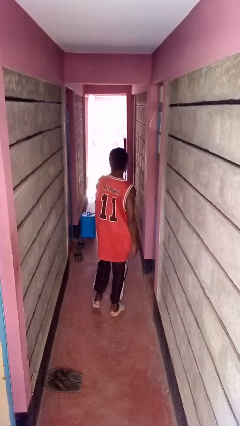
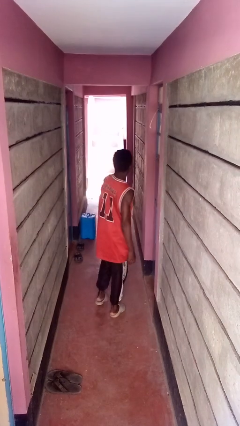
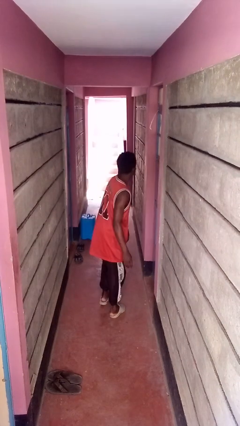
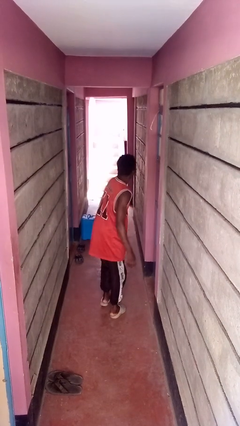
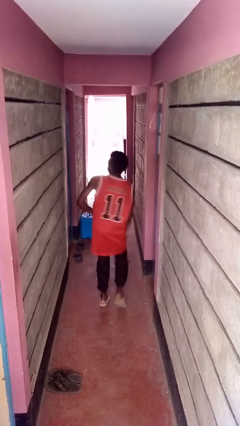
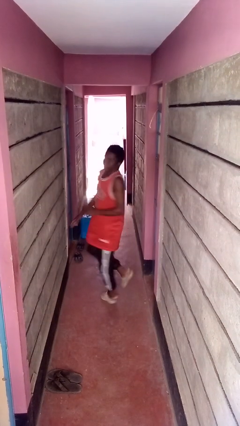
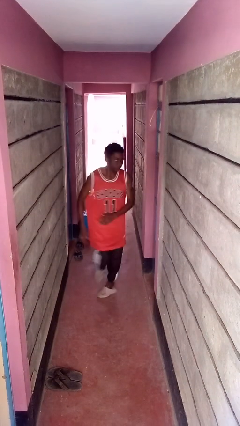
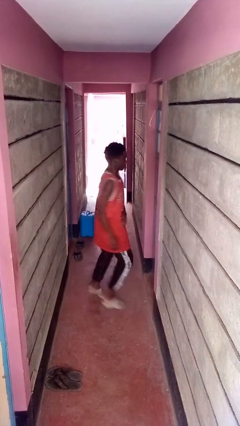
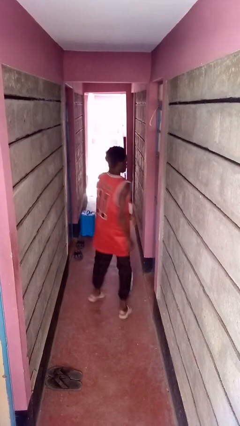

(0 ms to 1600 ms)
person twirls

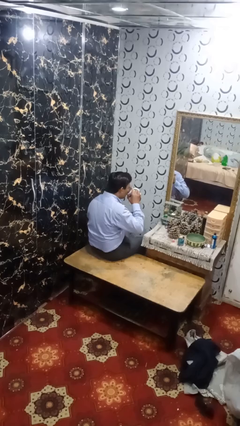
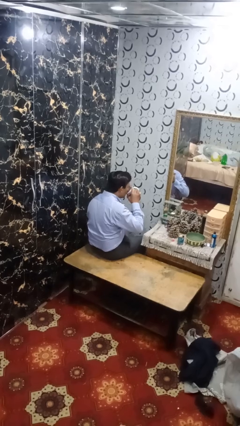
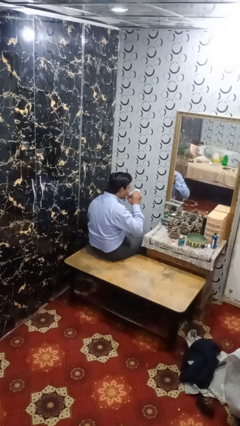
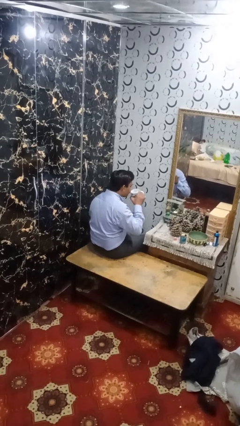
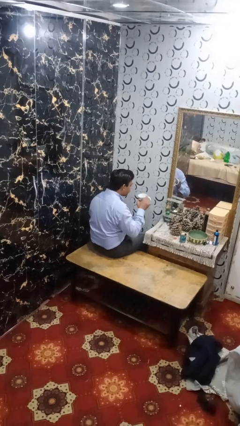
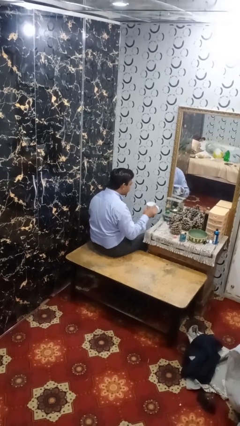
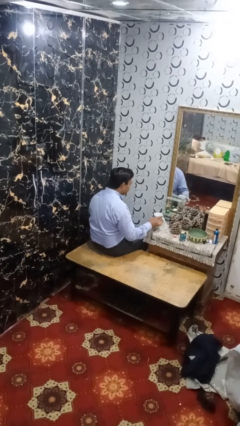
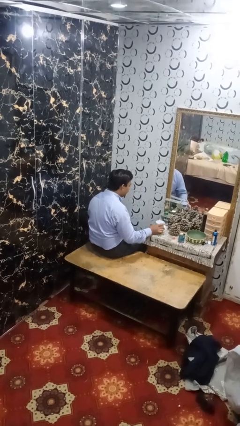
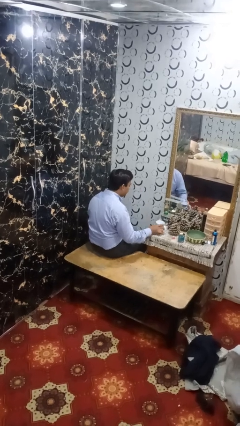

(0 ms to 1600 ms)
person puts down object on table

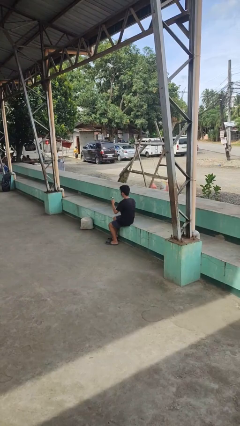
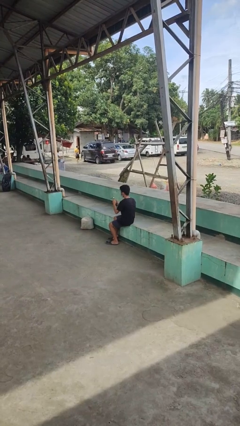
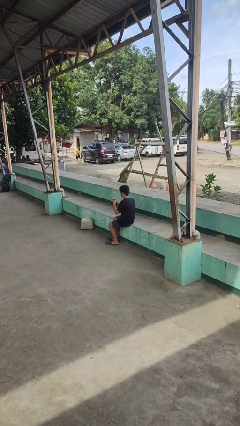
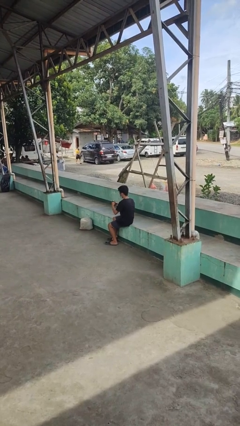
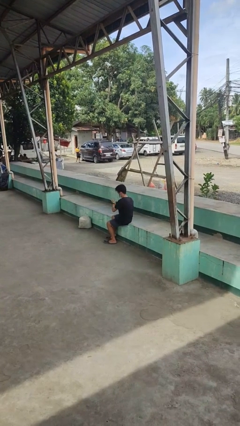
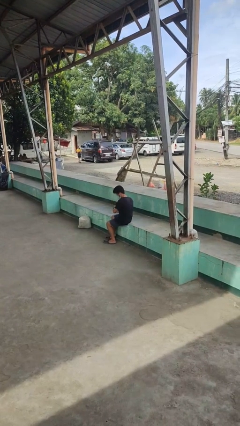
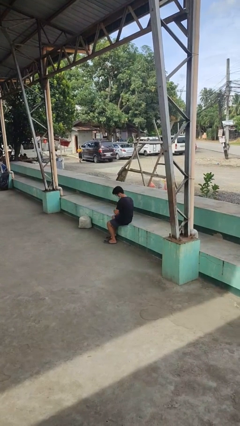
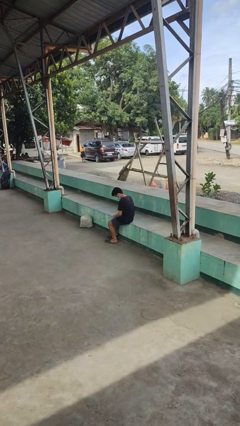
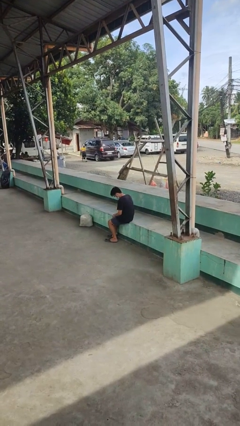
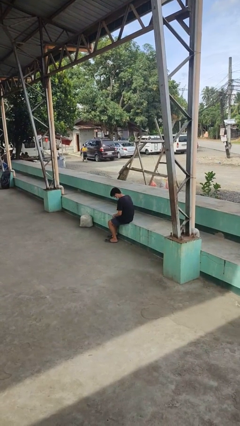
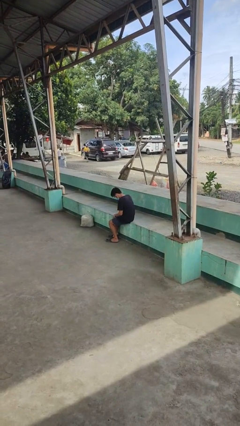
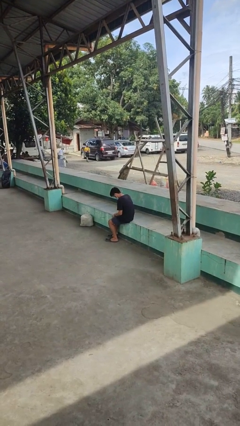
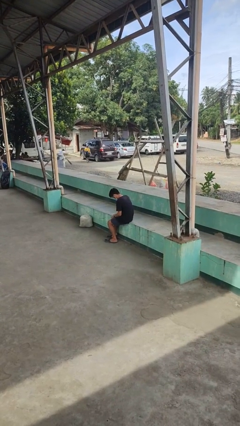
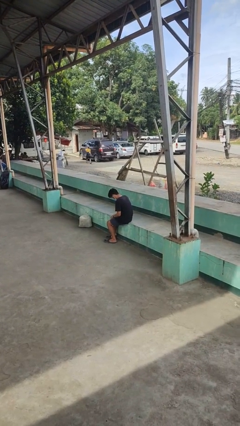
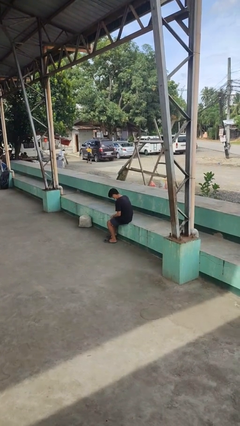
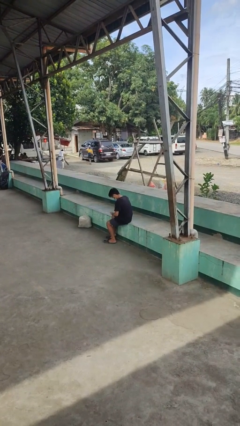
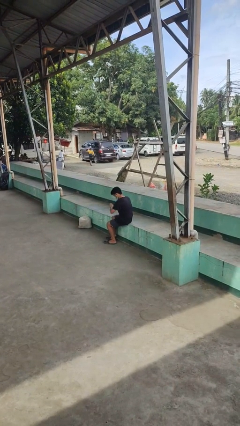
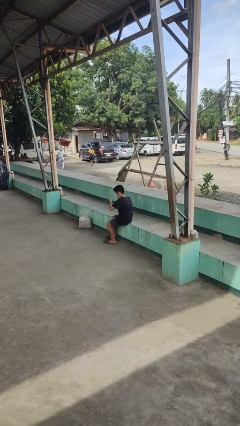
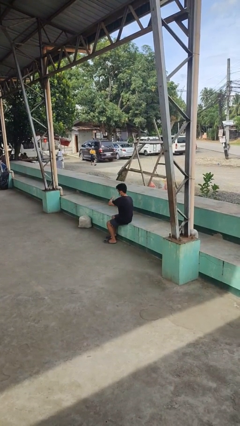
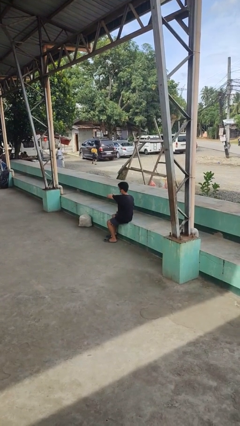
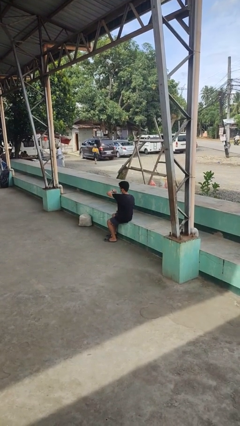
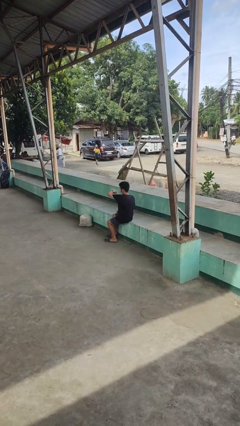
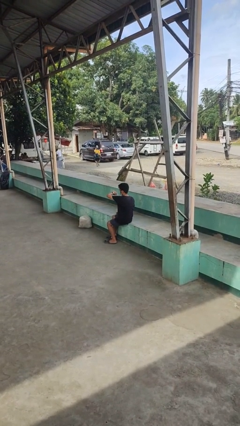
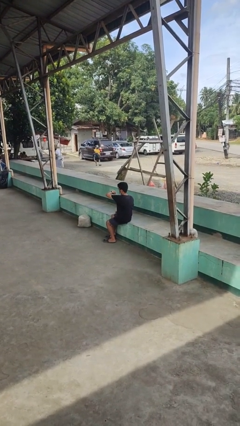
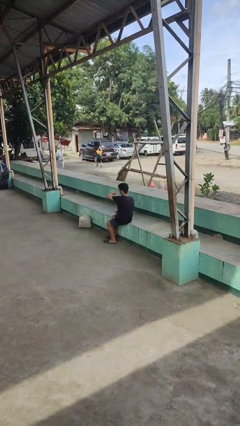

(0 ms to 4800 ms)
person puts on wristwatch

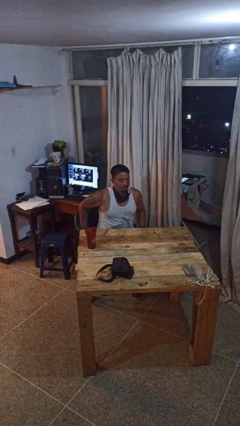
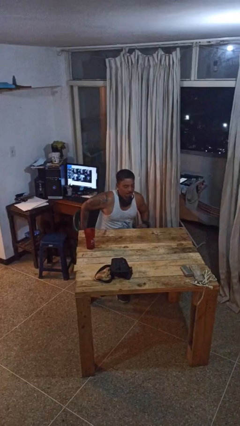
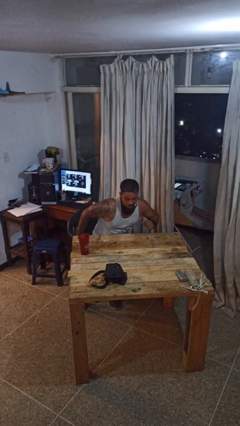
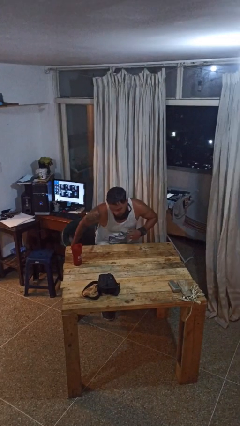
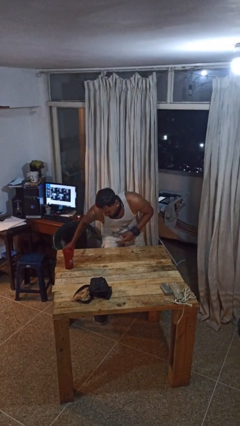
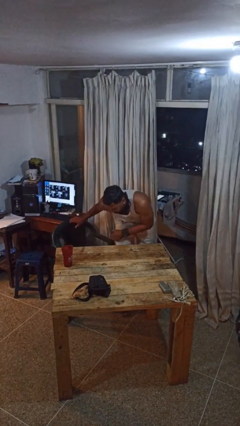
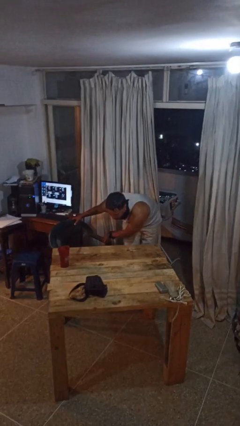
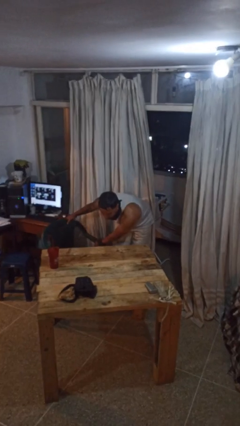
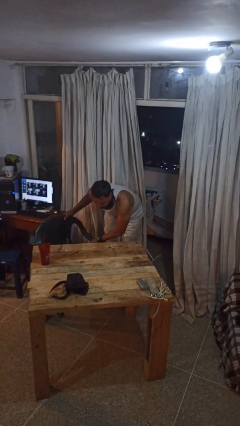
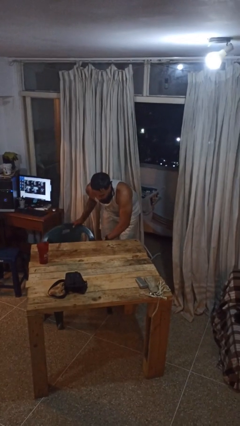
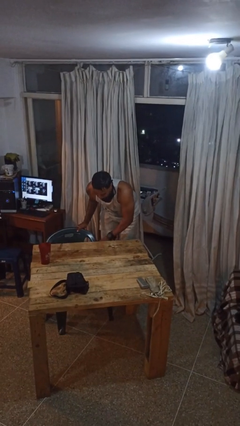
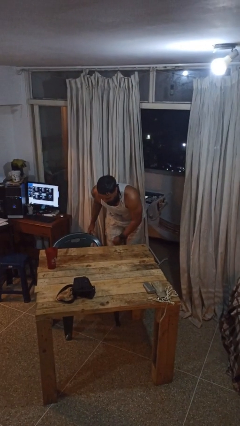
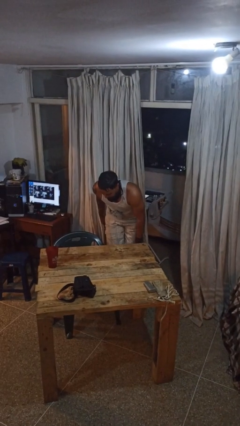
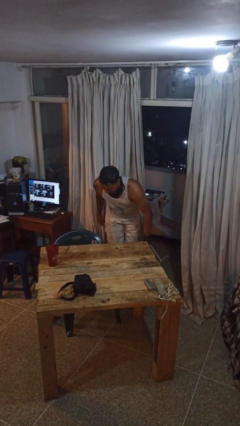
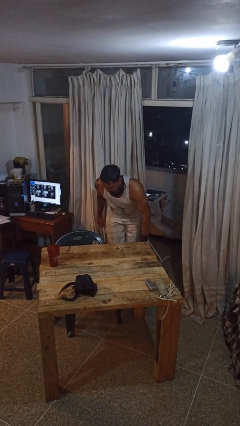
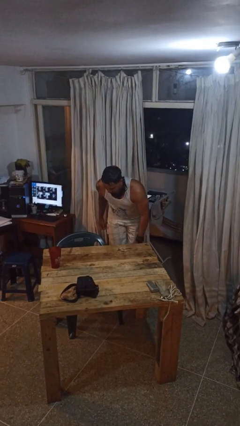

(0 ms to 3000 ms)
person stands up

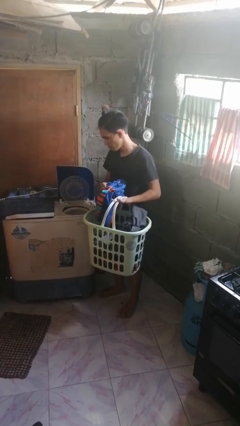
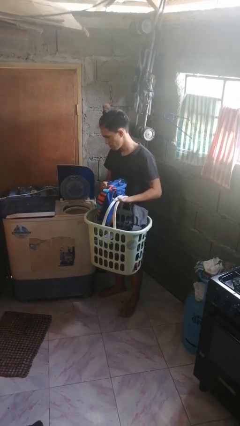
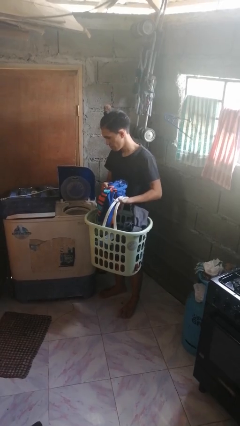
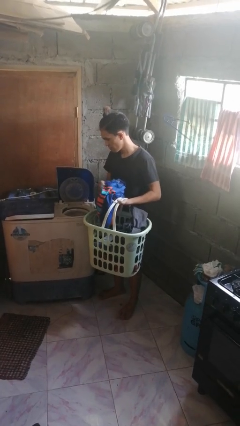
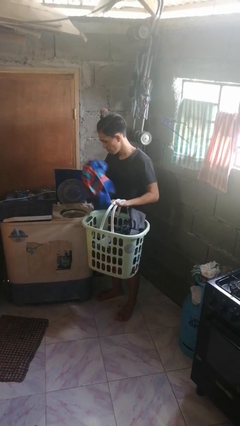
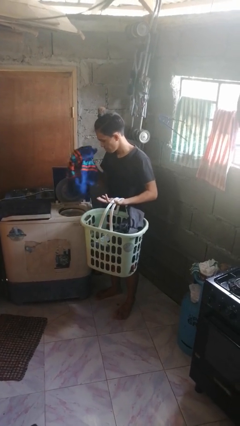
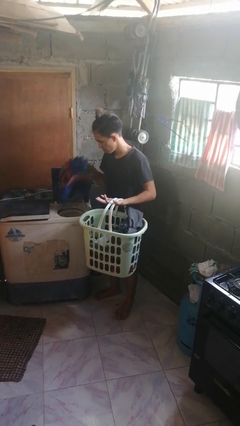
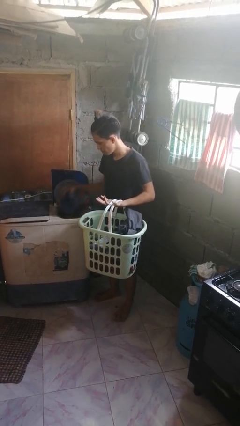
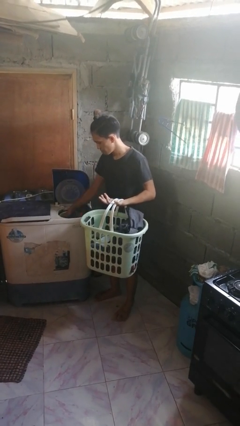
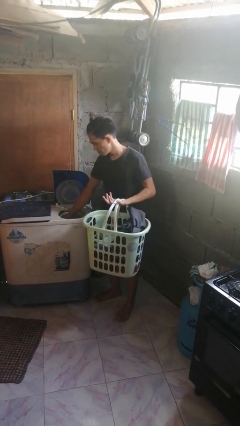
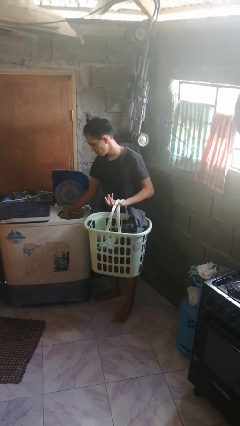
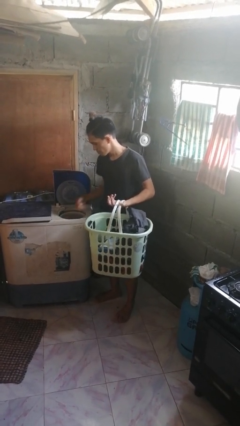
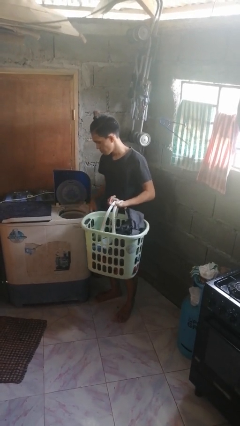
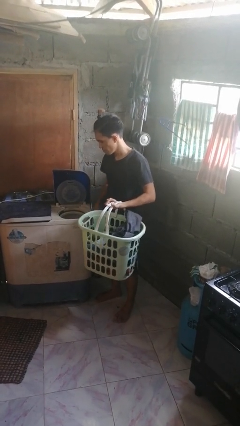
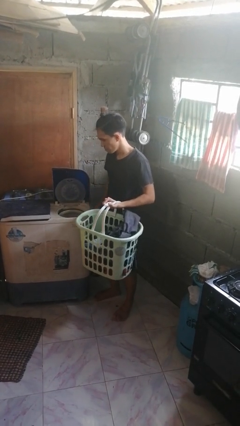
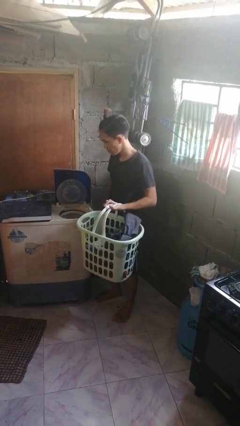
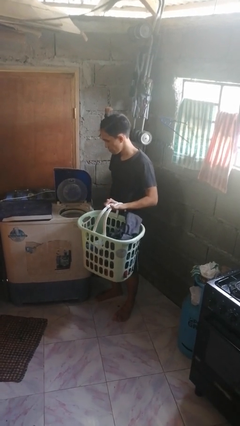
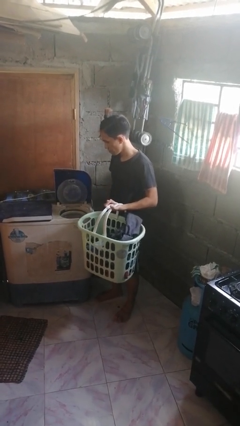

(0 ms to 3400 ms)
person loads dryer

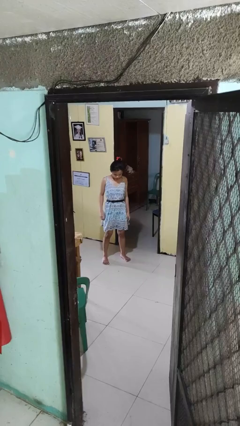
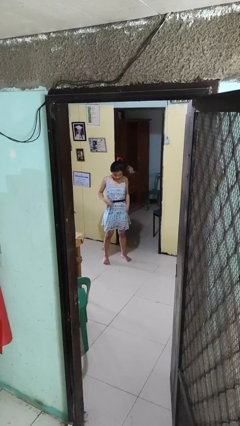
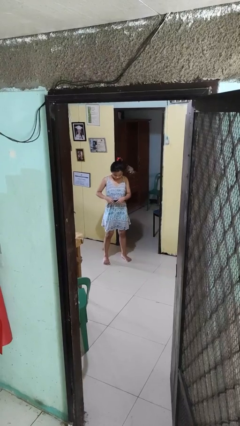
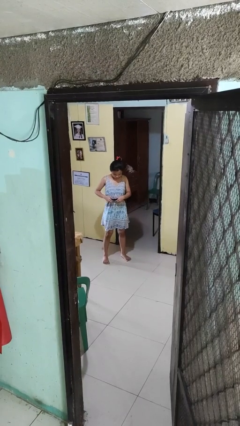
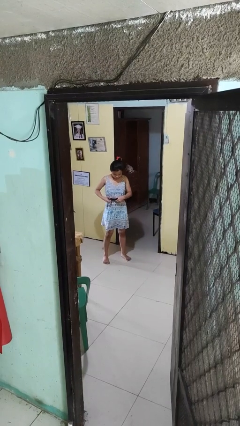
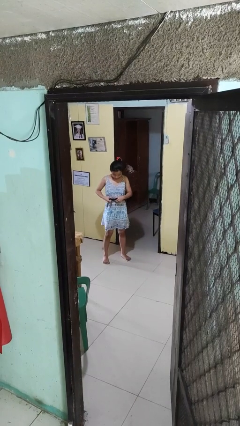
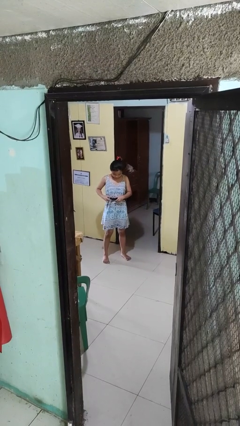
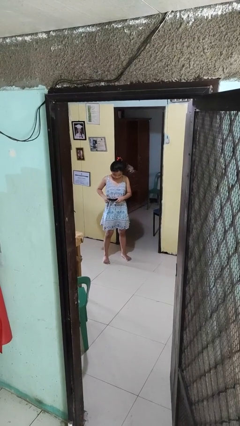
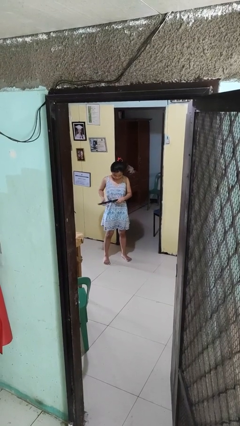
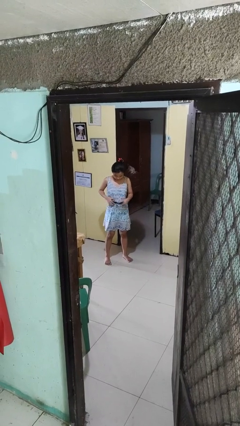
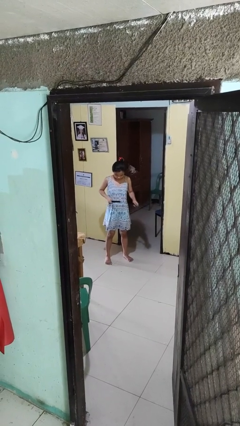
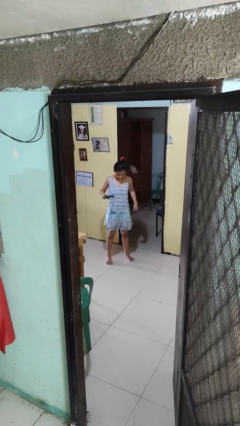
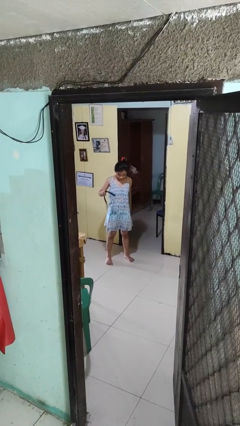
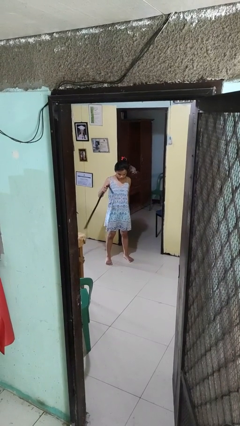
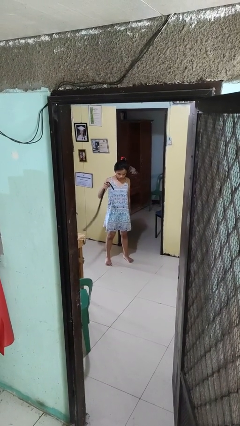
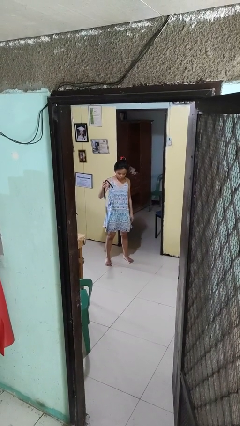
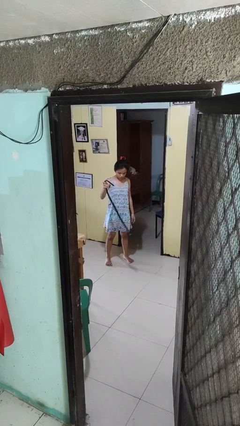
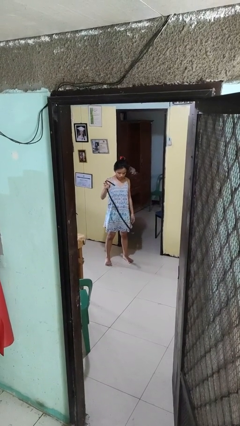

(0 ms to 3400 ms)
person takes off belt
